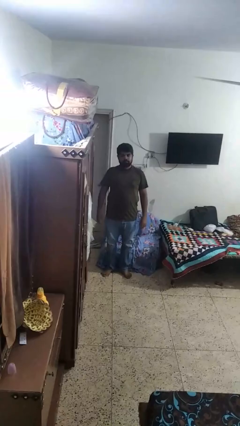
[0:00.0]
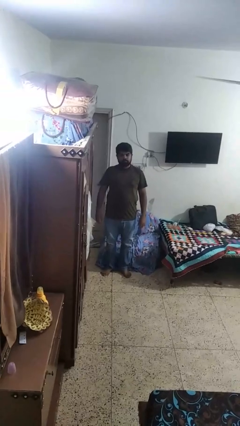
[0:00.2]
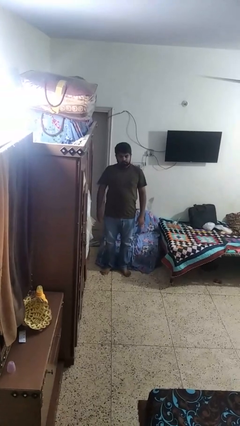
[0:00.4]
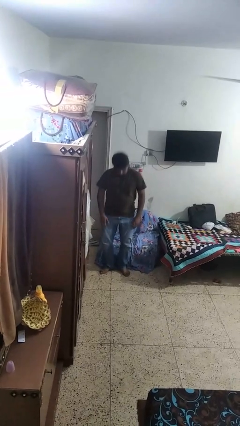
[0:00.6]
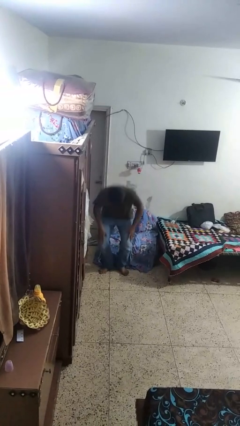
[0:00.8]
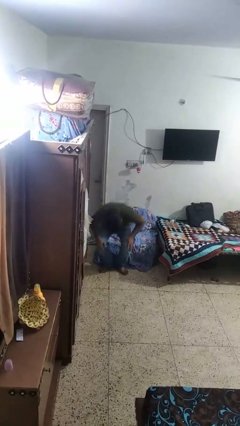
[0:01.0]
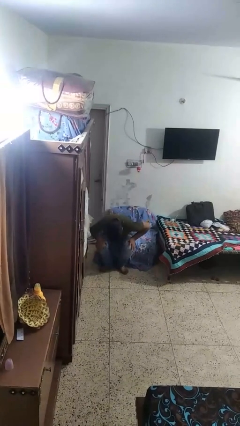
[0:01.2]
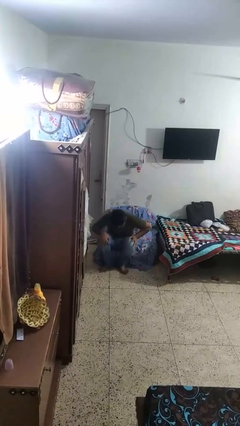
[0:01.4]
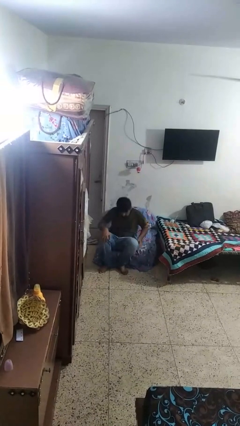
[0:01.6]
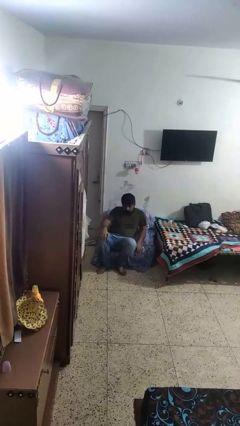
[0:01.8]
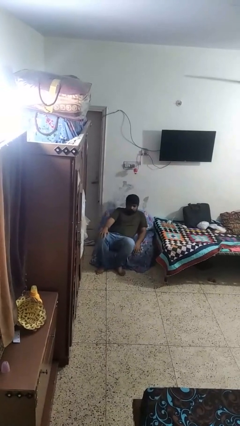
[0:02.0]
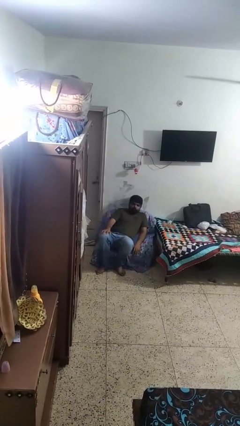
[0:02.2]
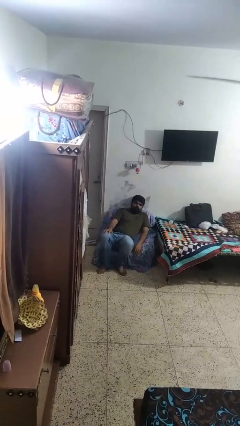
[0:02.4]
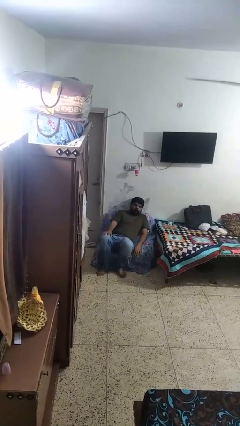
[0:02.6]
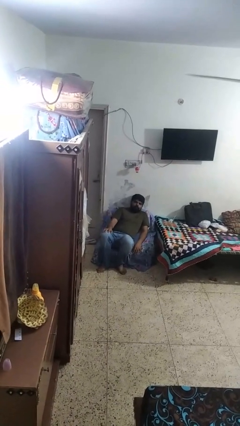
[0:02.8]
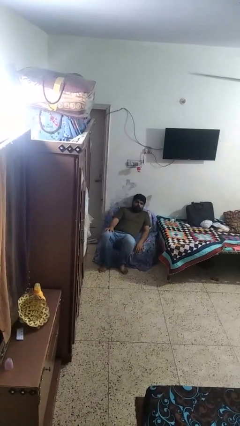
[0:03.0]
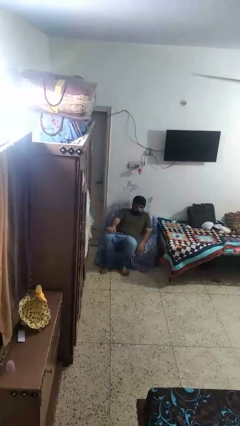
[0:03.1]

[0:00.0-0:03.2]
person lies down on couch

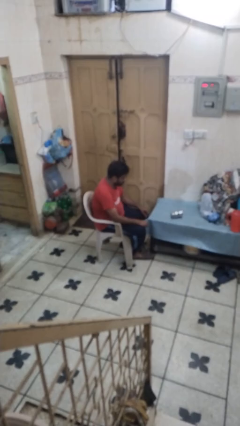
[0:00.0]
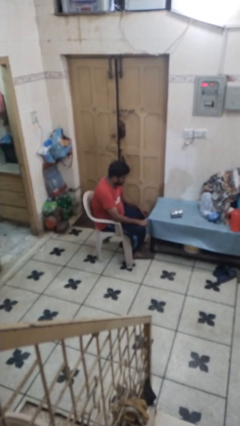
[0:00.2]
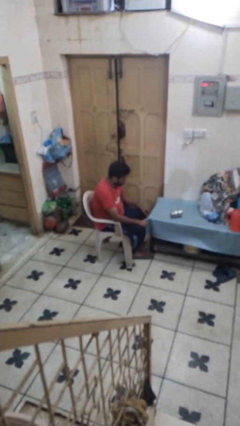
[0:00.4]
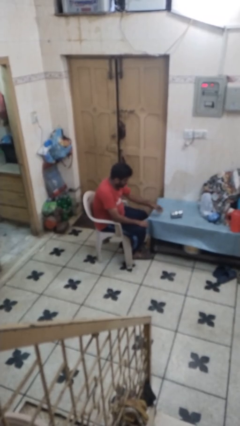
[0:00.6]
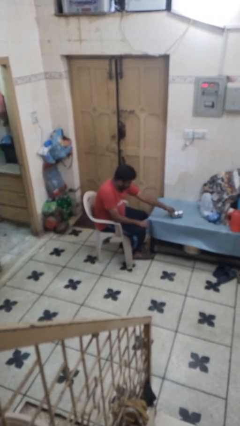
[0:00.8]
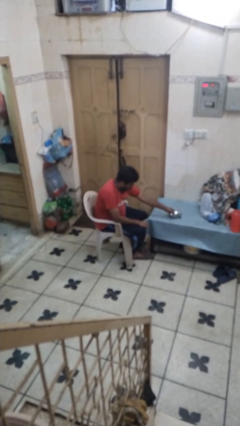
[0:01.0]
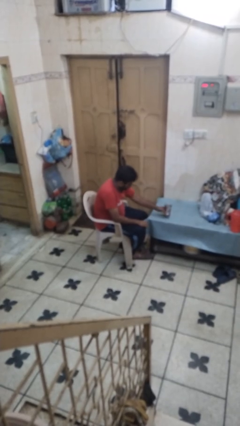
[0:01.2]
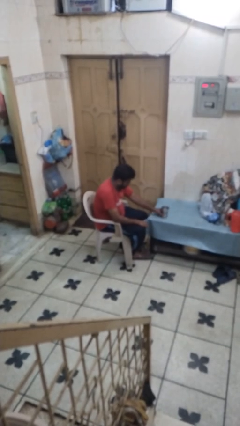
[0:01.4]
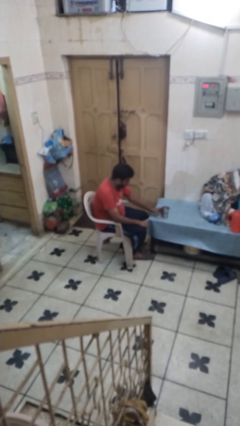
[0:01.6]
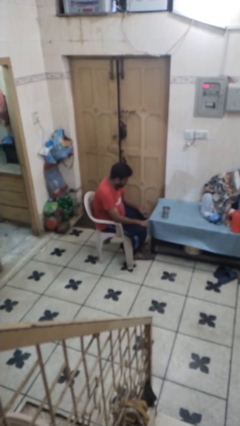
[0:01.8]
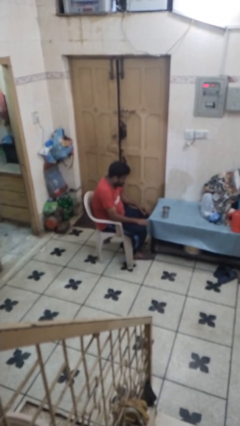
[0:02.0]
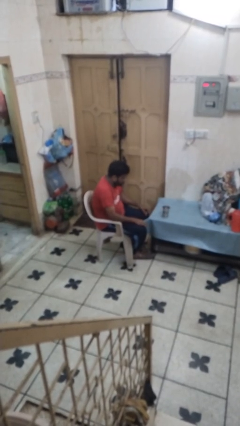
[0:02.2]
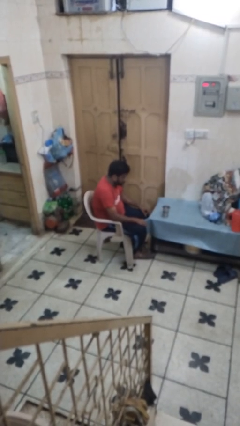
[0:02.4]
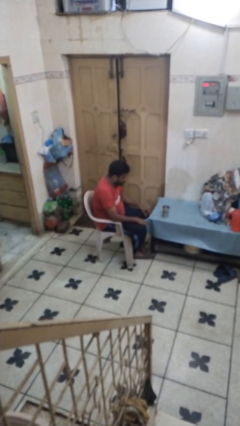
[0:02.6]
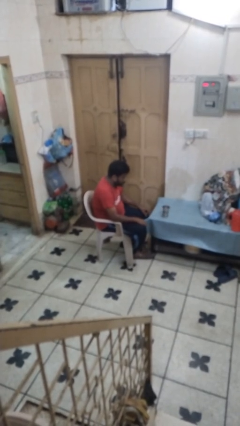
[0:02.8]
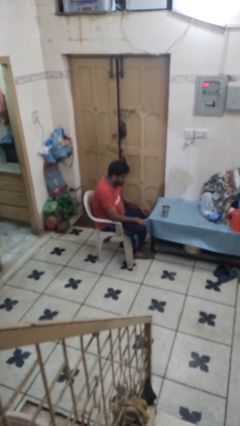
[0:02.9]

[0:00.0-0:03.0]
person sets upright glass

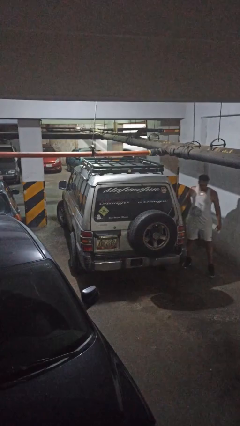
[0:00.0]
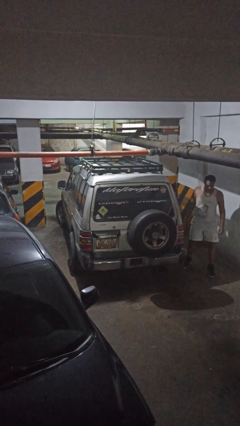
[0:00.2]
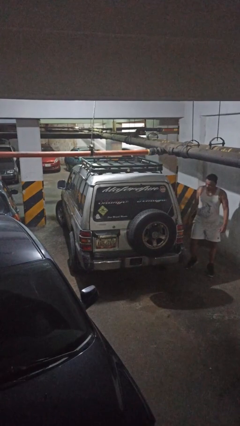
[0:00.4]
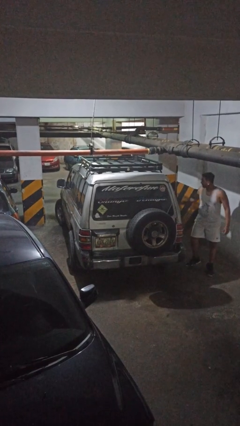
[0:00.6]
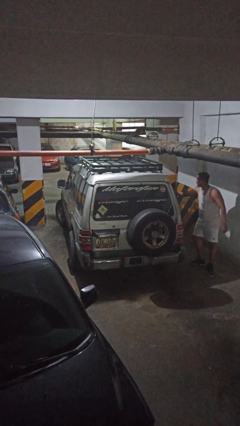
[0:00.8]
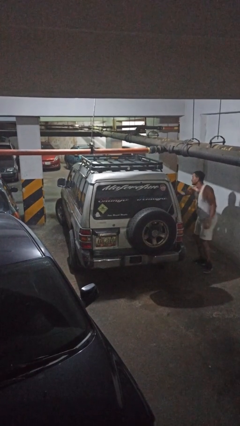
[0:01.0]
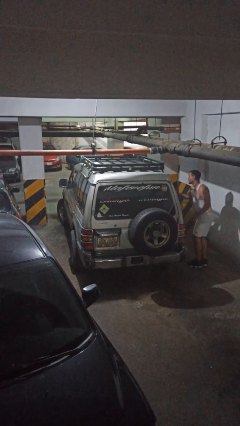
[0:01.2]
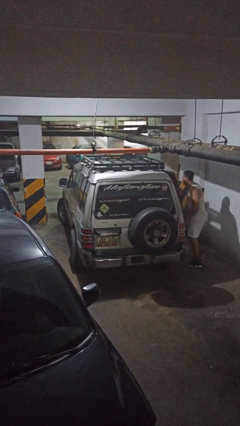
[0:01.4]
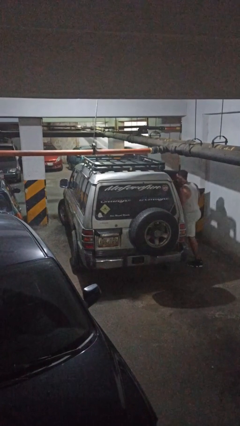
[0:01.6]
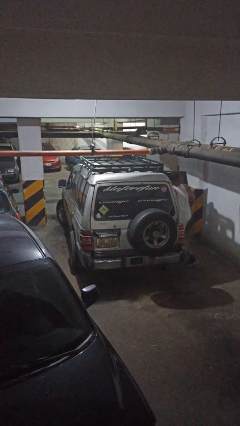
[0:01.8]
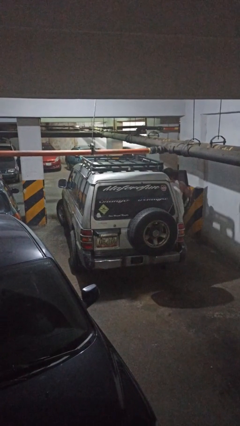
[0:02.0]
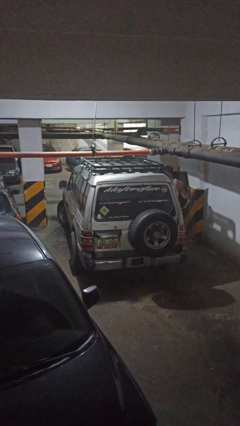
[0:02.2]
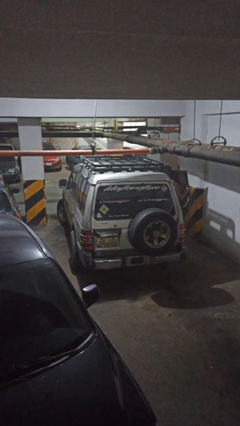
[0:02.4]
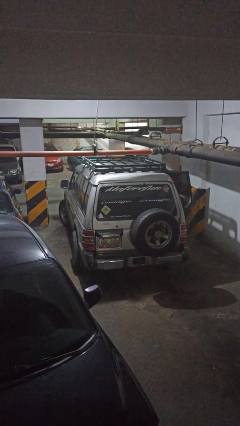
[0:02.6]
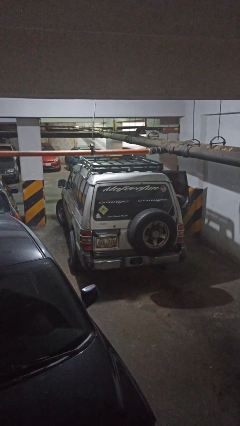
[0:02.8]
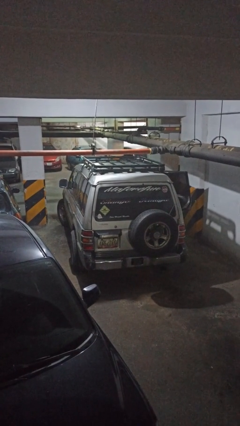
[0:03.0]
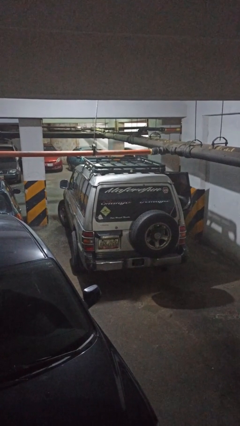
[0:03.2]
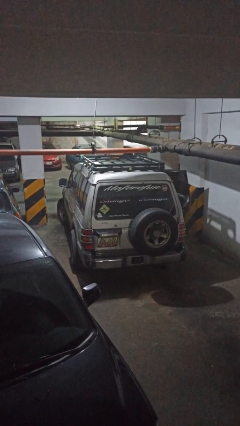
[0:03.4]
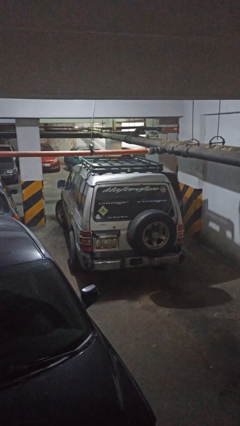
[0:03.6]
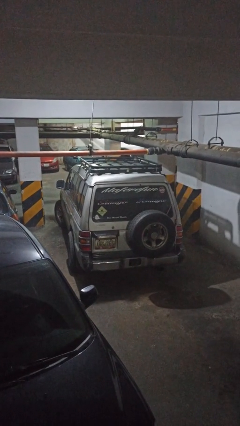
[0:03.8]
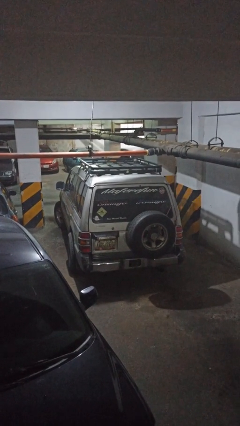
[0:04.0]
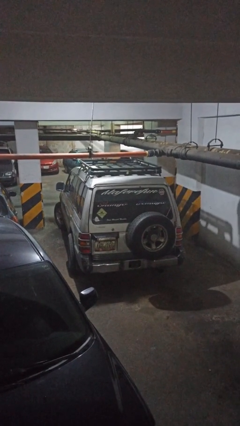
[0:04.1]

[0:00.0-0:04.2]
car picks up person

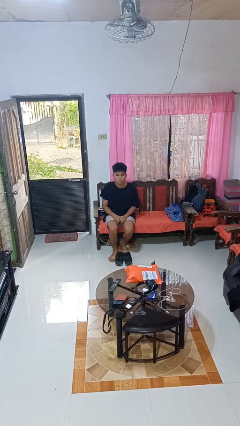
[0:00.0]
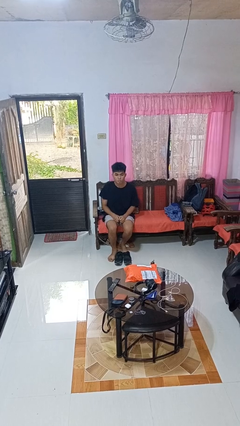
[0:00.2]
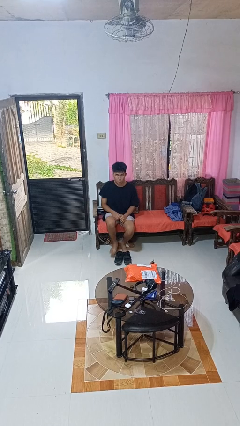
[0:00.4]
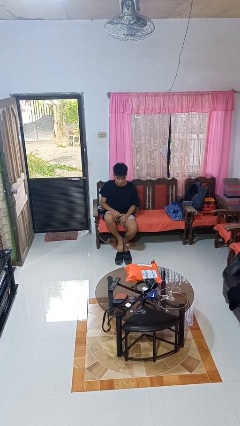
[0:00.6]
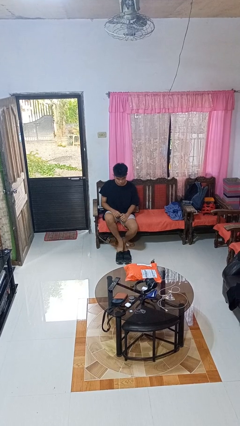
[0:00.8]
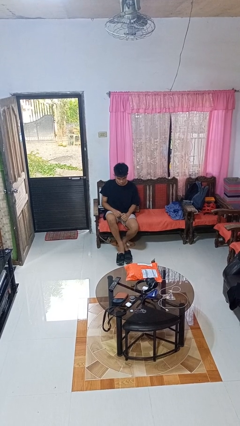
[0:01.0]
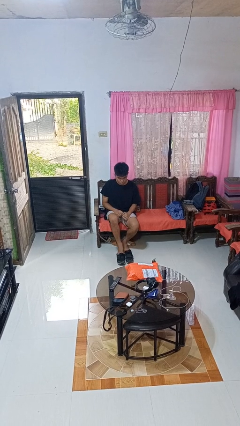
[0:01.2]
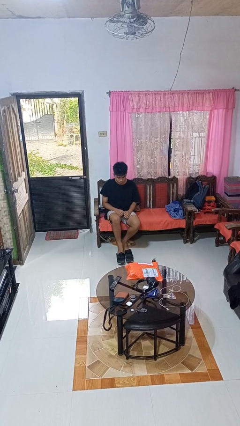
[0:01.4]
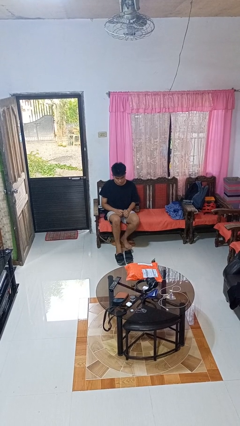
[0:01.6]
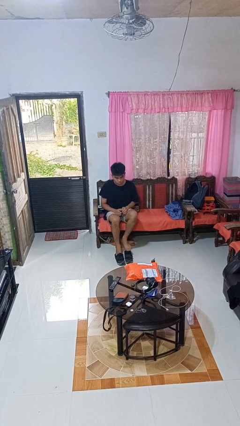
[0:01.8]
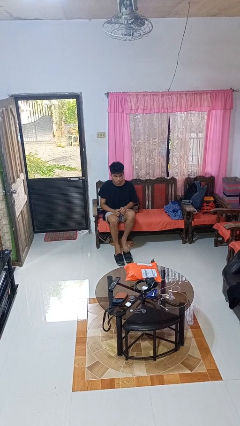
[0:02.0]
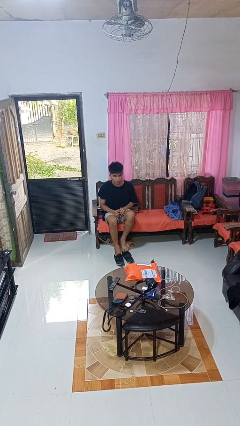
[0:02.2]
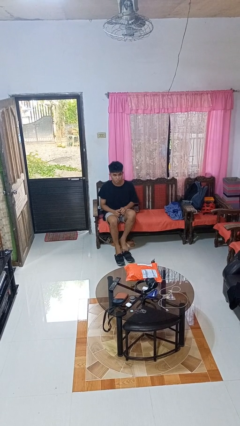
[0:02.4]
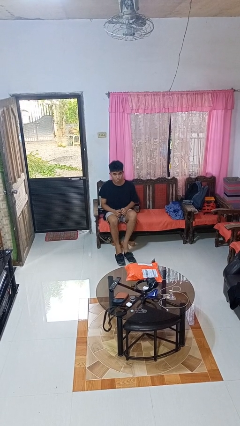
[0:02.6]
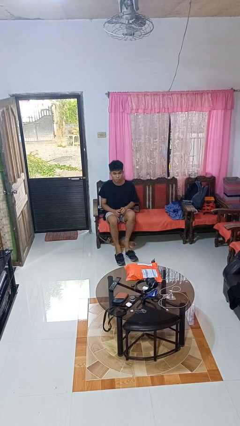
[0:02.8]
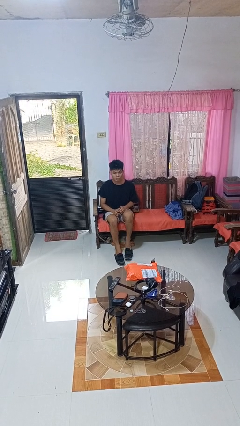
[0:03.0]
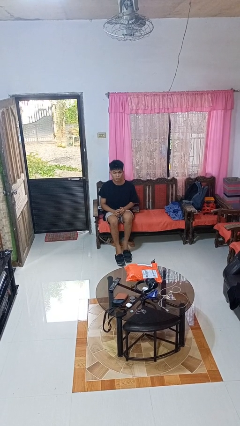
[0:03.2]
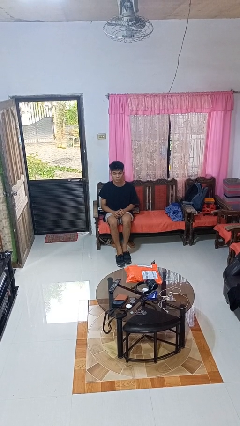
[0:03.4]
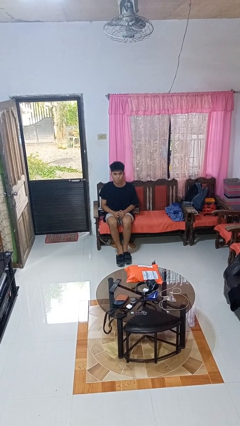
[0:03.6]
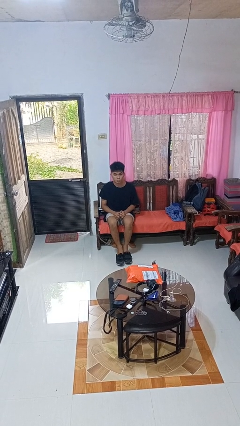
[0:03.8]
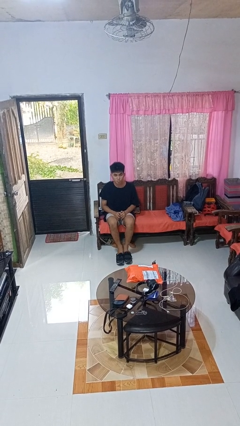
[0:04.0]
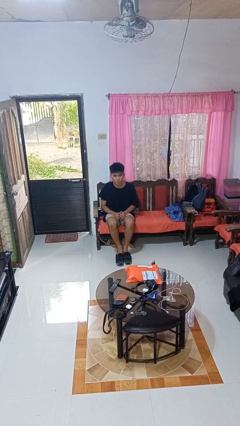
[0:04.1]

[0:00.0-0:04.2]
person puts on shoes

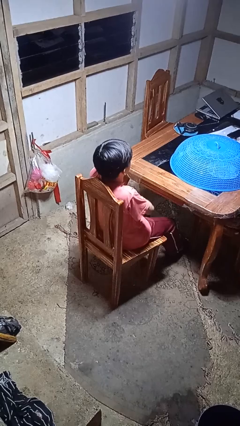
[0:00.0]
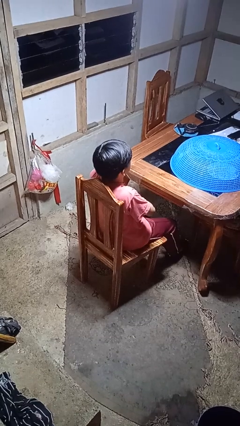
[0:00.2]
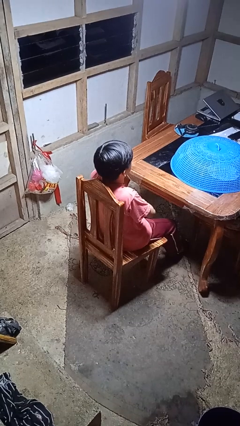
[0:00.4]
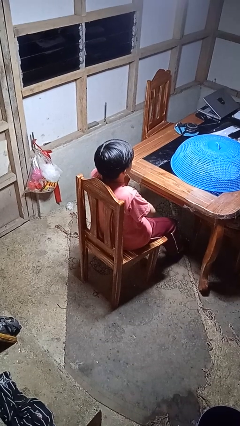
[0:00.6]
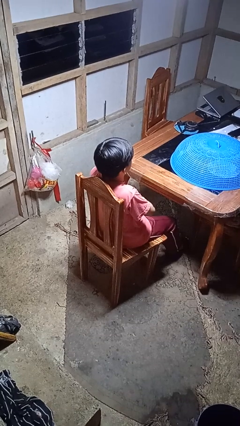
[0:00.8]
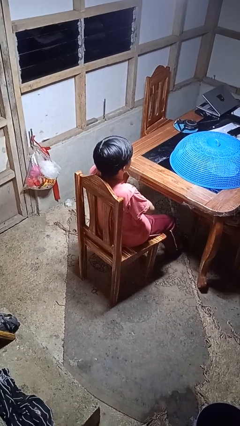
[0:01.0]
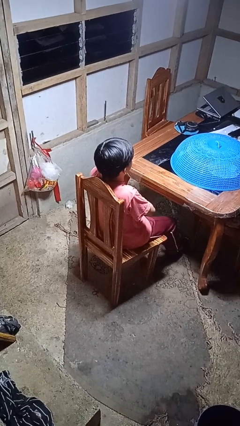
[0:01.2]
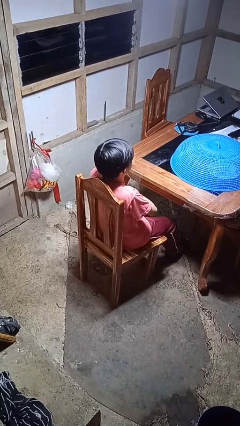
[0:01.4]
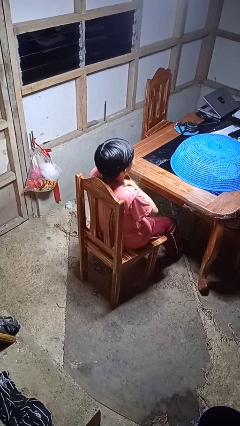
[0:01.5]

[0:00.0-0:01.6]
person crosses arms

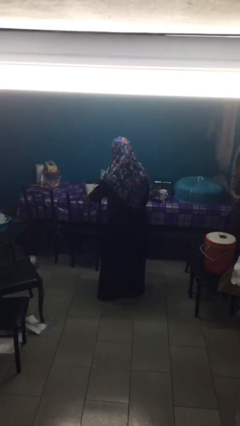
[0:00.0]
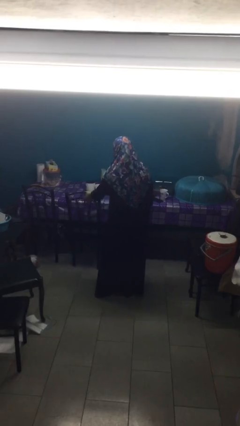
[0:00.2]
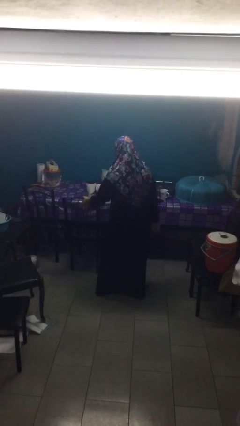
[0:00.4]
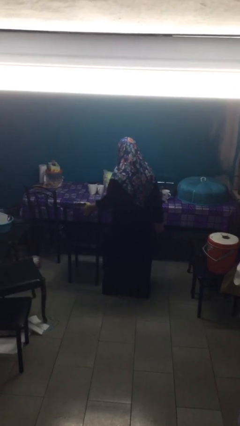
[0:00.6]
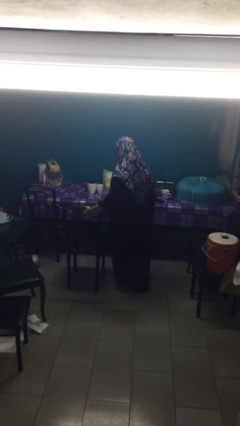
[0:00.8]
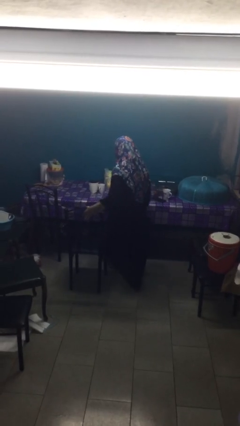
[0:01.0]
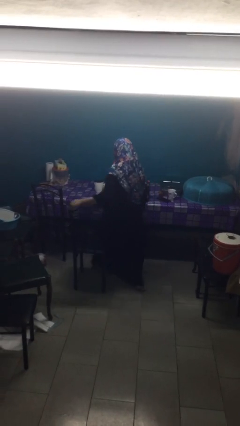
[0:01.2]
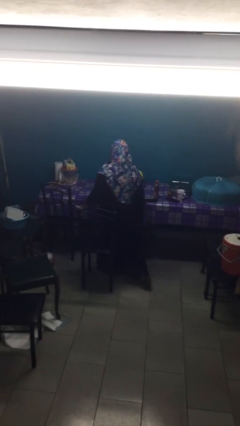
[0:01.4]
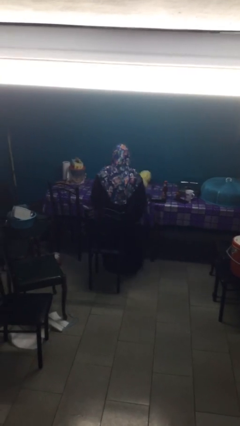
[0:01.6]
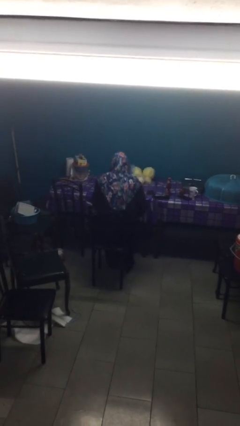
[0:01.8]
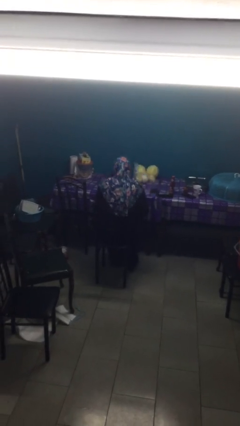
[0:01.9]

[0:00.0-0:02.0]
person sits down
